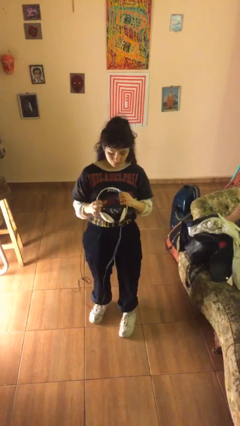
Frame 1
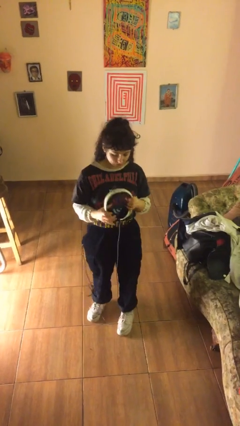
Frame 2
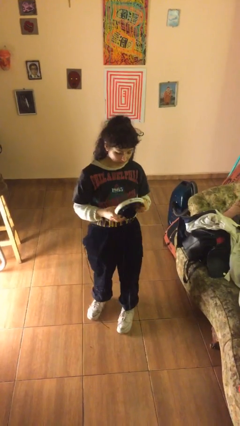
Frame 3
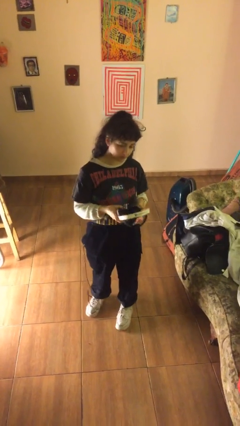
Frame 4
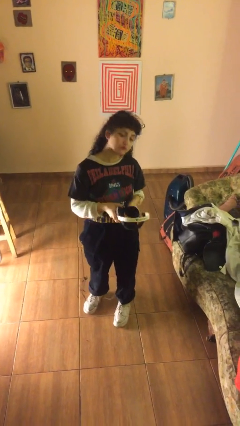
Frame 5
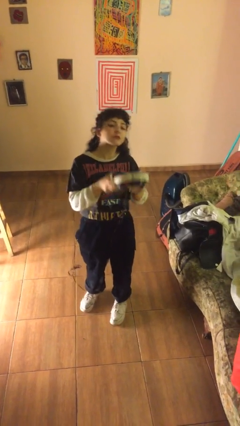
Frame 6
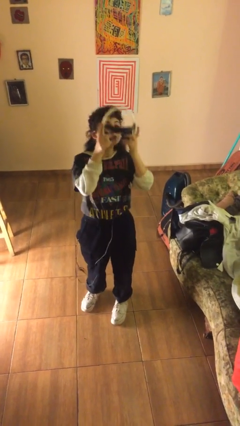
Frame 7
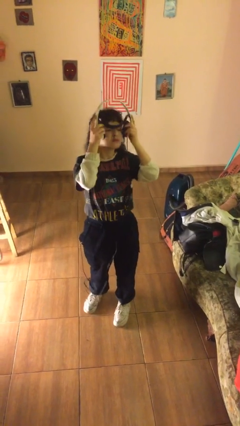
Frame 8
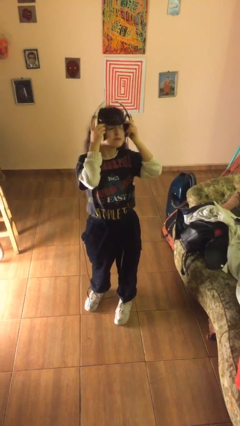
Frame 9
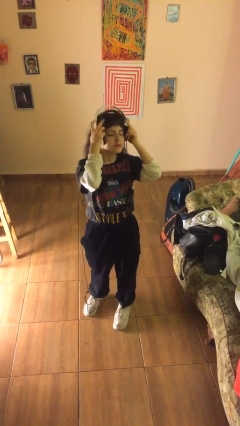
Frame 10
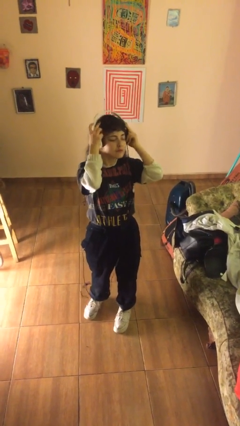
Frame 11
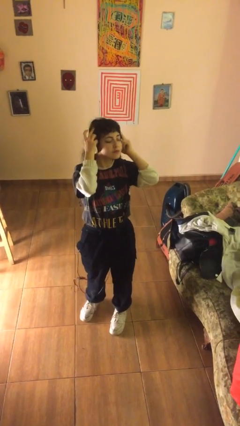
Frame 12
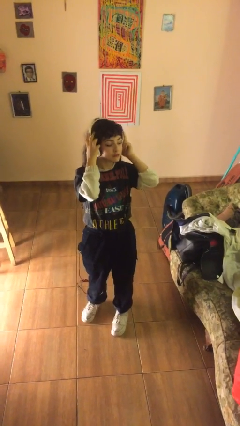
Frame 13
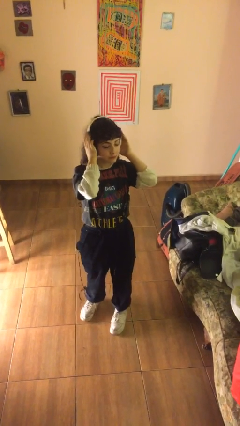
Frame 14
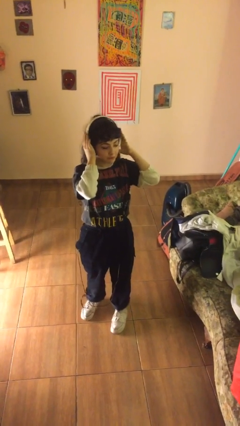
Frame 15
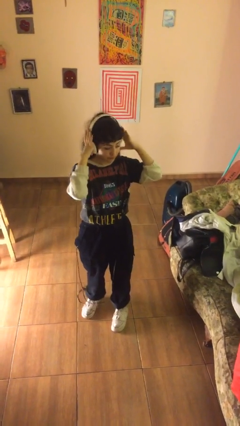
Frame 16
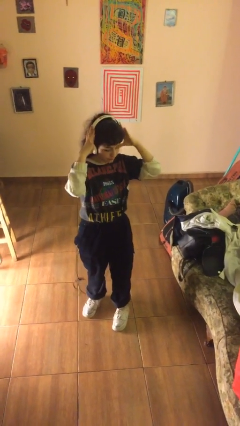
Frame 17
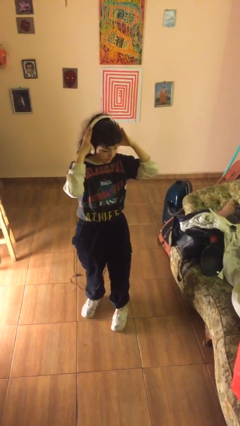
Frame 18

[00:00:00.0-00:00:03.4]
person puts on headphones

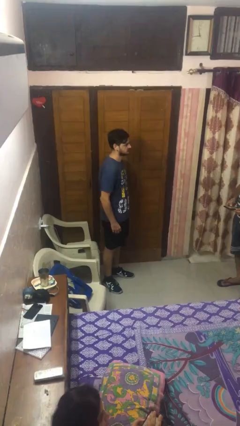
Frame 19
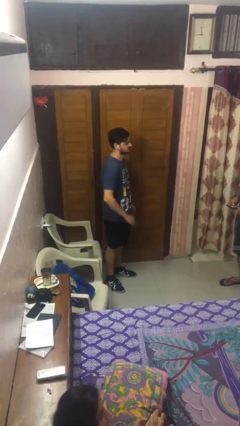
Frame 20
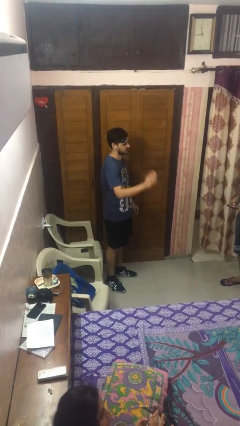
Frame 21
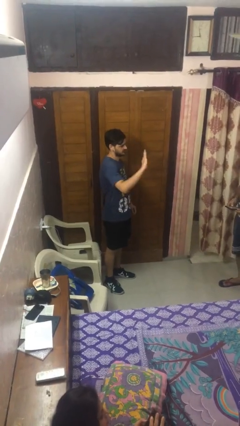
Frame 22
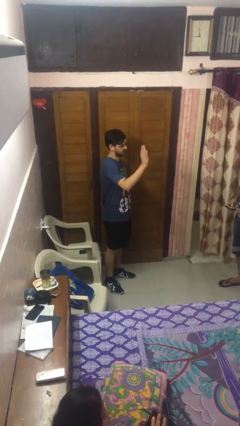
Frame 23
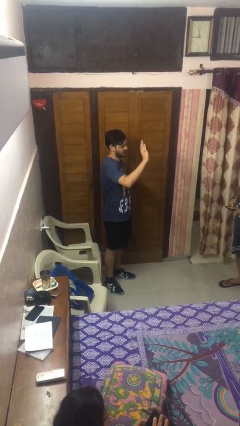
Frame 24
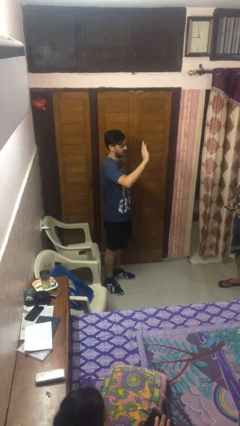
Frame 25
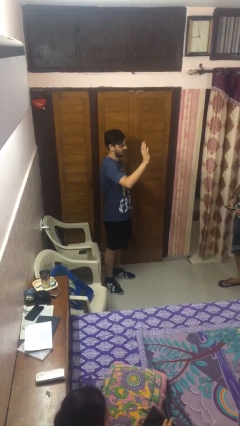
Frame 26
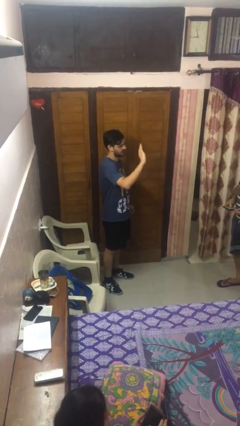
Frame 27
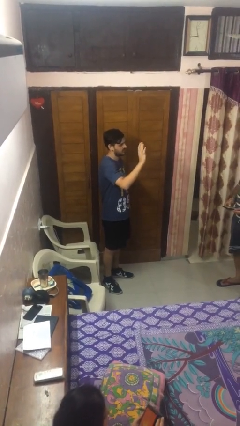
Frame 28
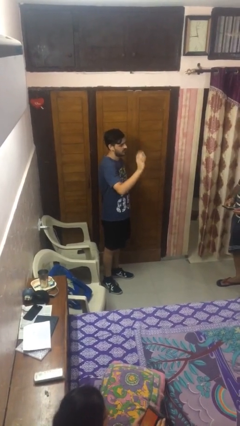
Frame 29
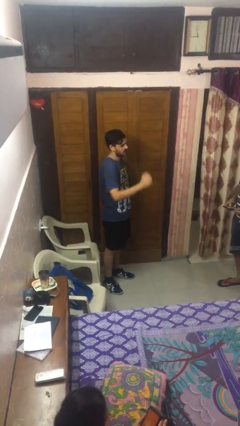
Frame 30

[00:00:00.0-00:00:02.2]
person waves at person

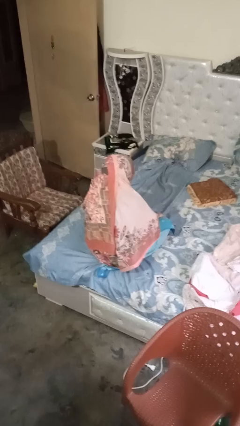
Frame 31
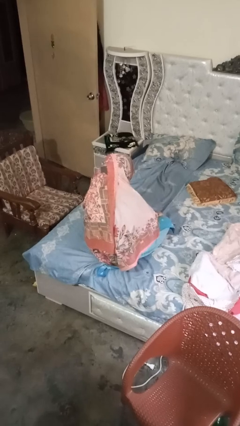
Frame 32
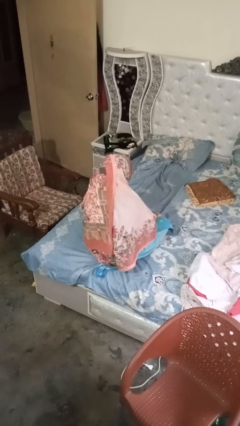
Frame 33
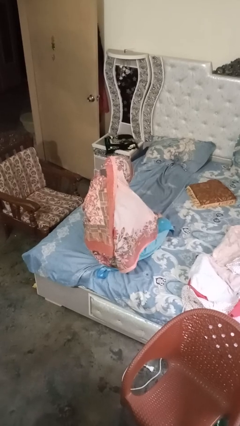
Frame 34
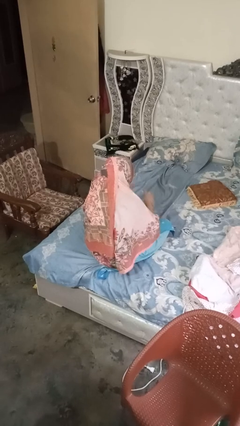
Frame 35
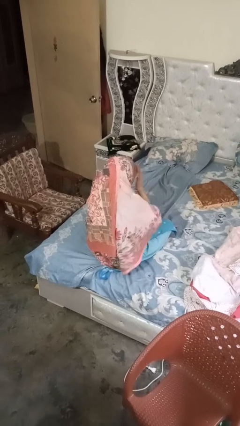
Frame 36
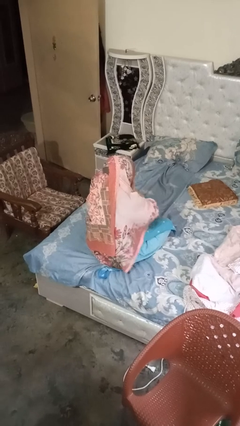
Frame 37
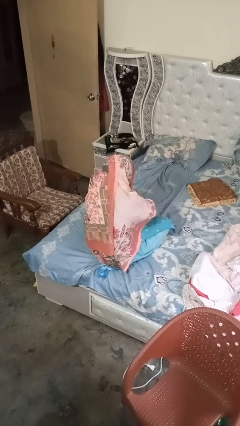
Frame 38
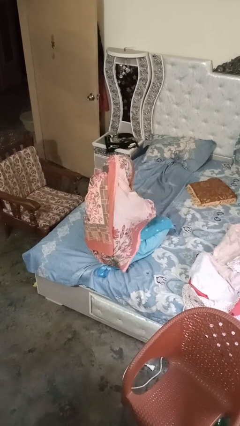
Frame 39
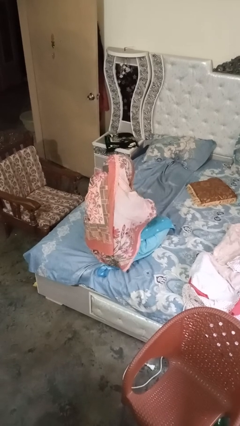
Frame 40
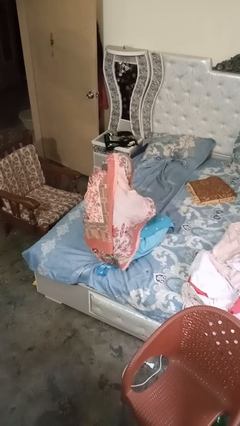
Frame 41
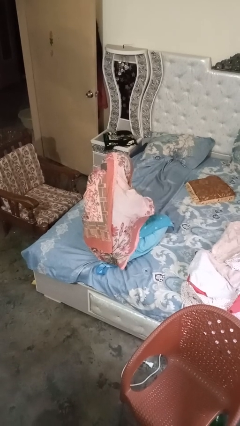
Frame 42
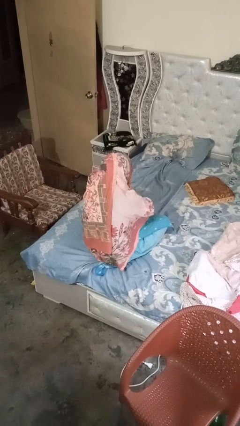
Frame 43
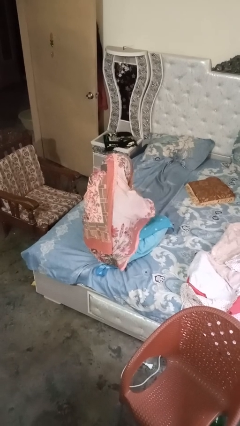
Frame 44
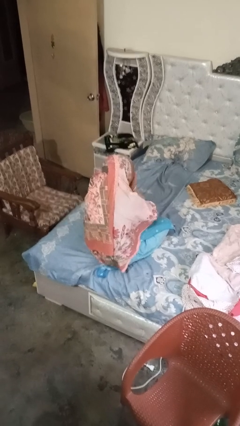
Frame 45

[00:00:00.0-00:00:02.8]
person covers face with hands

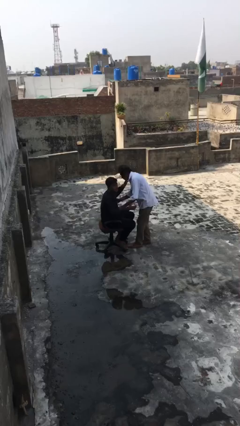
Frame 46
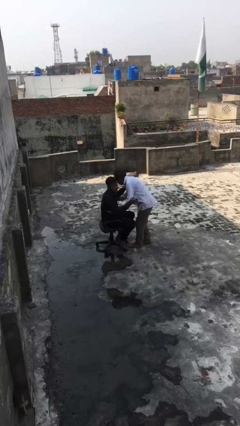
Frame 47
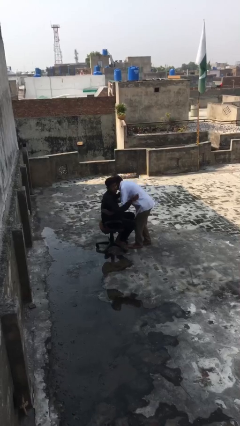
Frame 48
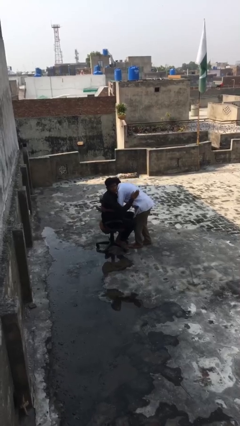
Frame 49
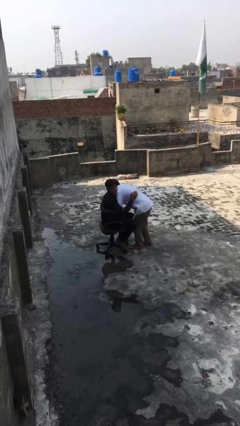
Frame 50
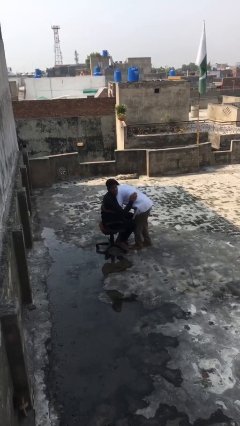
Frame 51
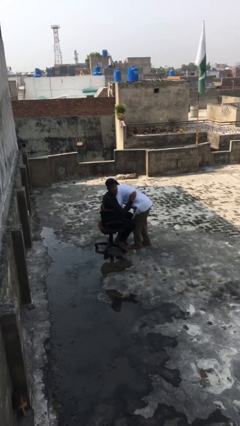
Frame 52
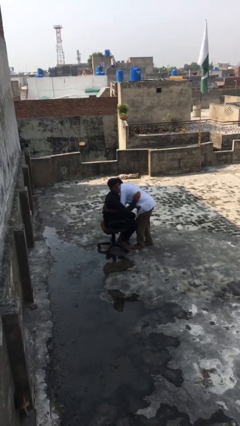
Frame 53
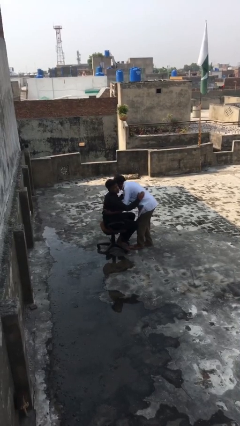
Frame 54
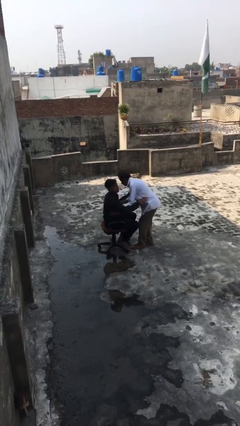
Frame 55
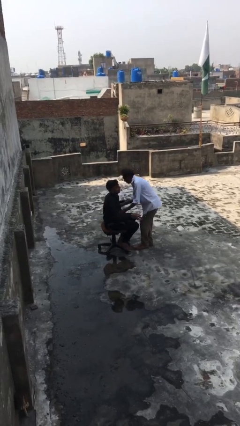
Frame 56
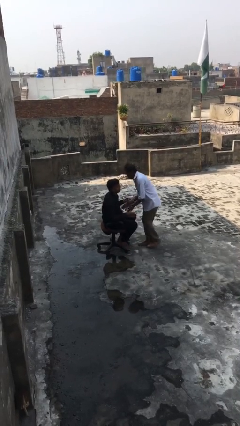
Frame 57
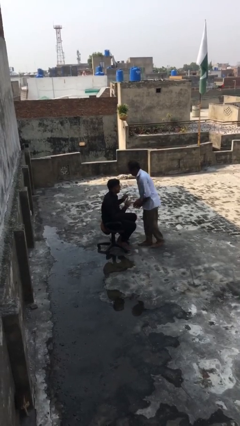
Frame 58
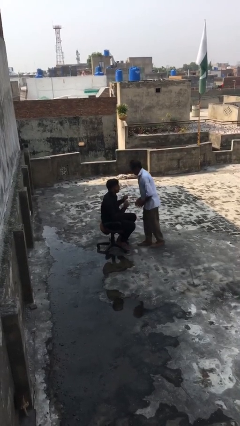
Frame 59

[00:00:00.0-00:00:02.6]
person embraces person

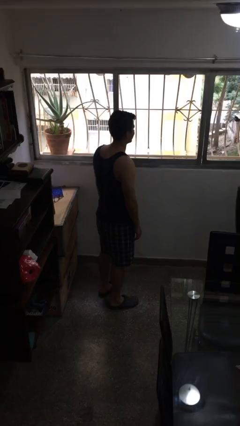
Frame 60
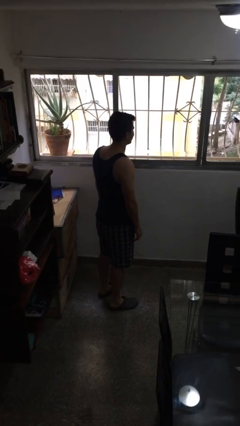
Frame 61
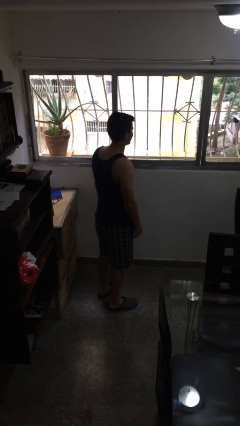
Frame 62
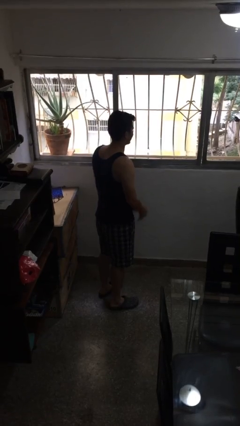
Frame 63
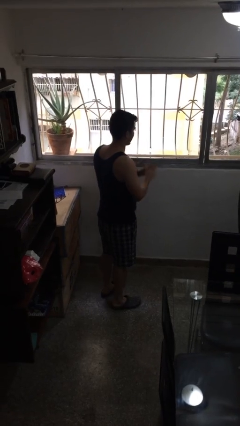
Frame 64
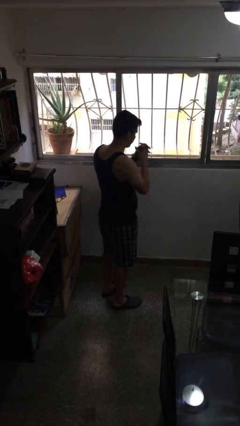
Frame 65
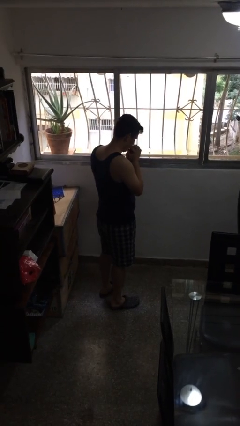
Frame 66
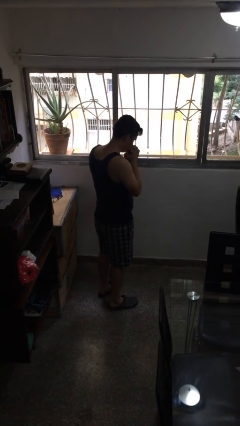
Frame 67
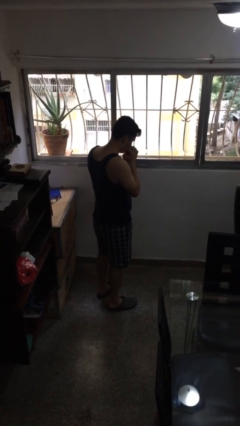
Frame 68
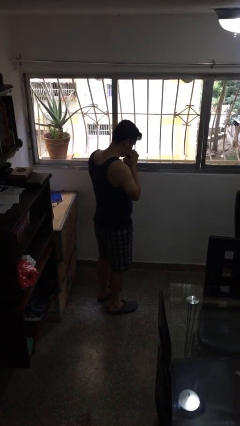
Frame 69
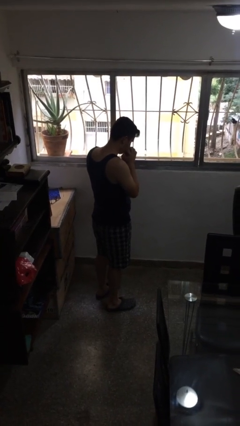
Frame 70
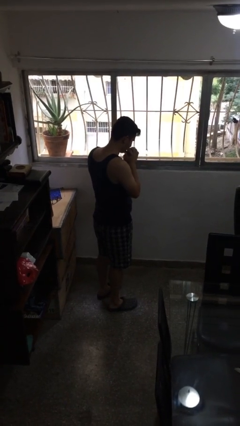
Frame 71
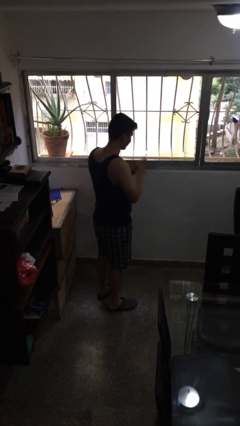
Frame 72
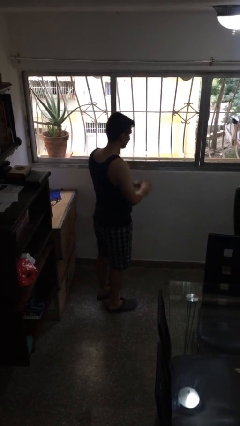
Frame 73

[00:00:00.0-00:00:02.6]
person prays

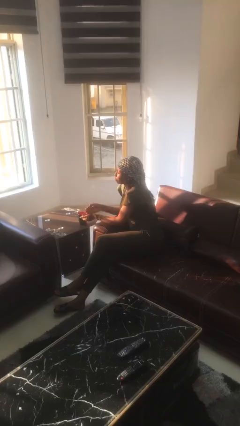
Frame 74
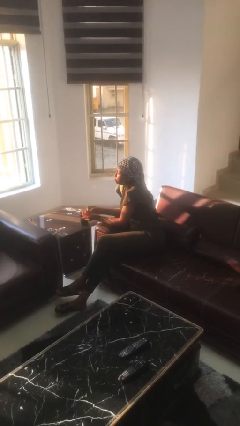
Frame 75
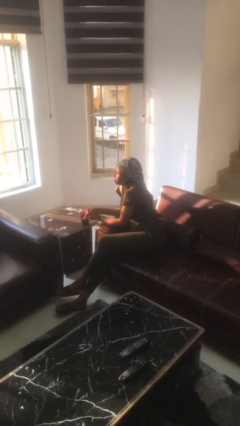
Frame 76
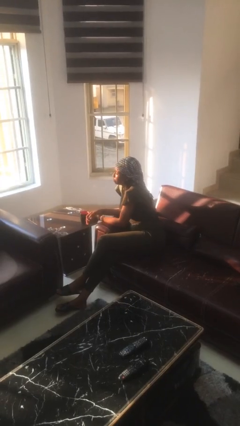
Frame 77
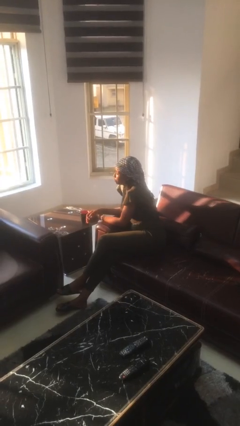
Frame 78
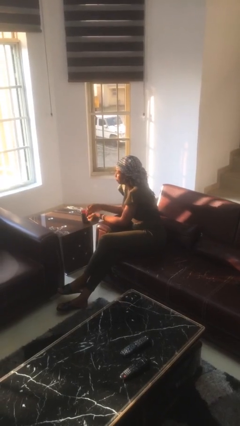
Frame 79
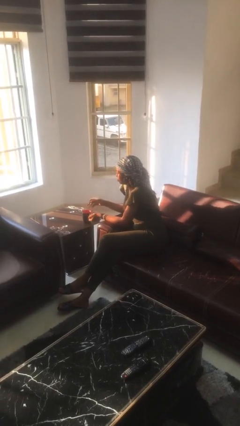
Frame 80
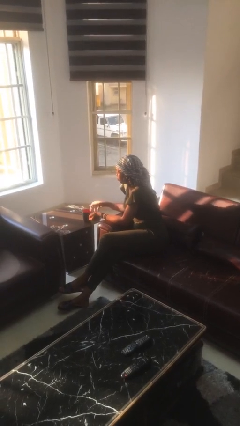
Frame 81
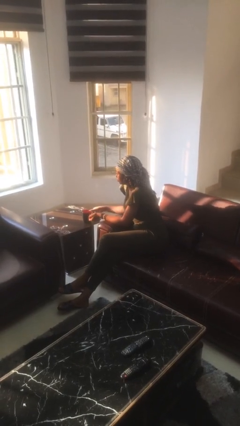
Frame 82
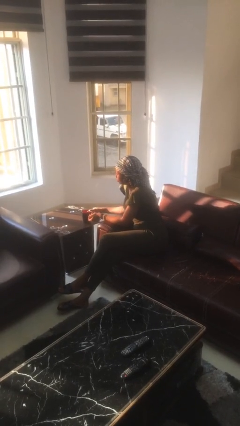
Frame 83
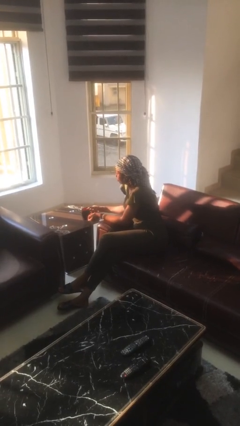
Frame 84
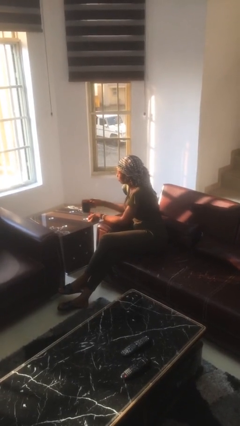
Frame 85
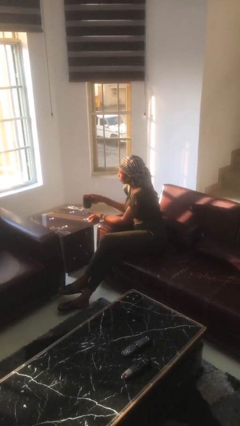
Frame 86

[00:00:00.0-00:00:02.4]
person picks up object from table

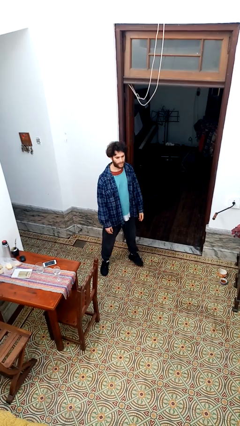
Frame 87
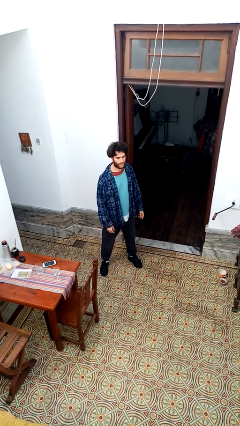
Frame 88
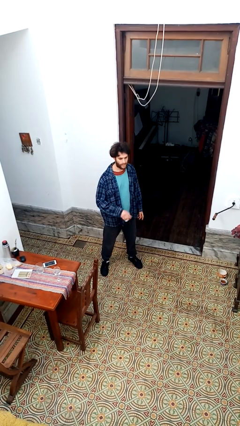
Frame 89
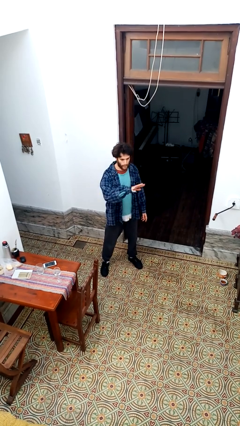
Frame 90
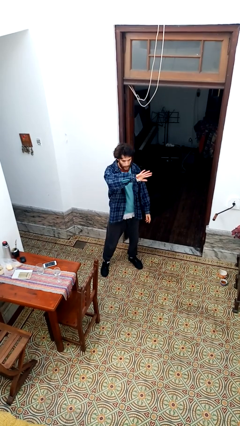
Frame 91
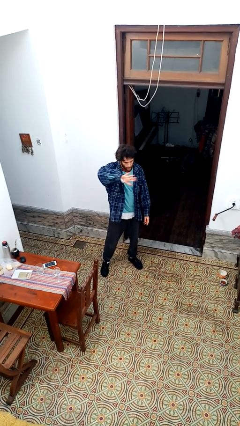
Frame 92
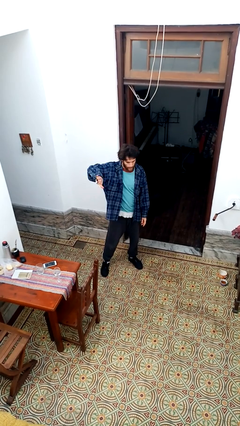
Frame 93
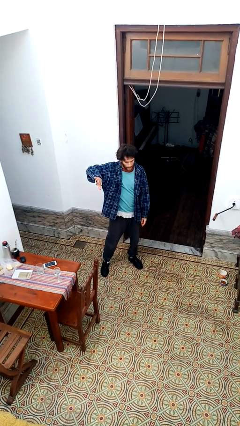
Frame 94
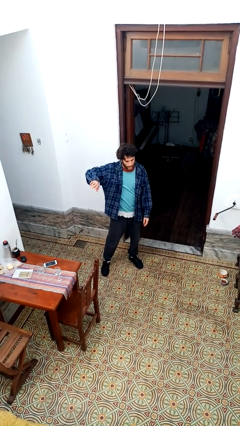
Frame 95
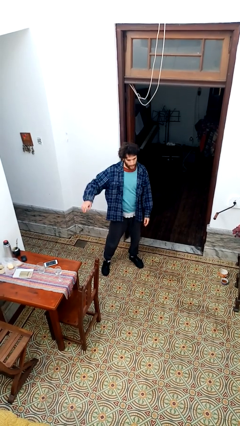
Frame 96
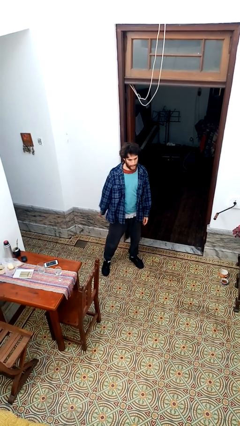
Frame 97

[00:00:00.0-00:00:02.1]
person gestures swipe right
